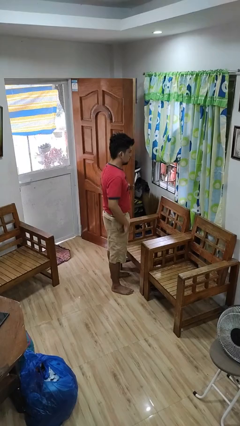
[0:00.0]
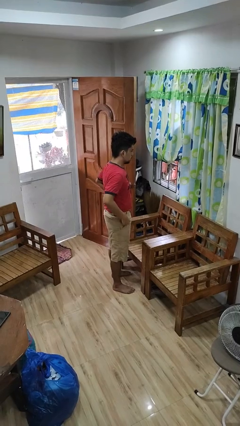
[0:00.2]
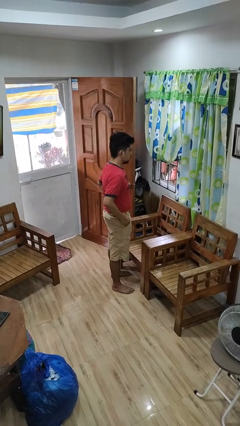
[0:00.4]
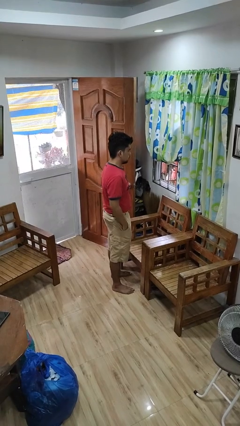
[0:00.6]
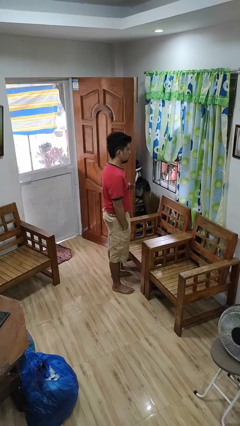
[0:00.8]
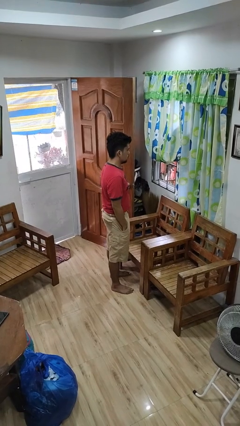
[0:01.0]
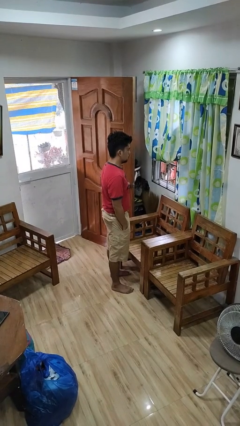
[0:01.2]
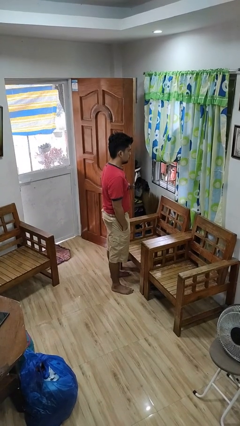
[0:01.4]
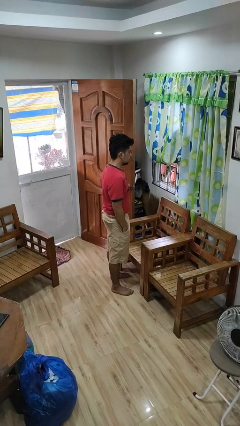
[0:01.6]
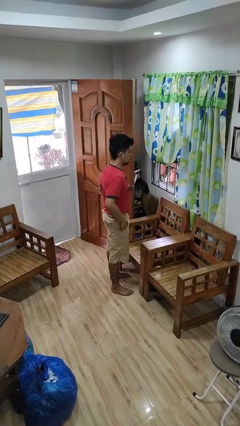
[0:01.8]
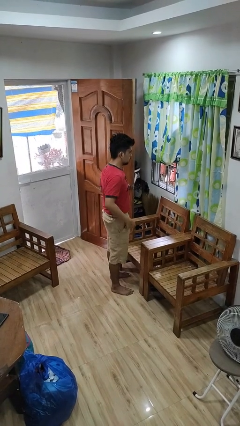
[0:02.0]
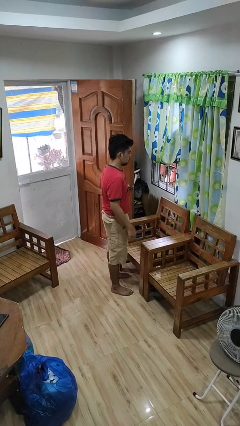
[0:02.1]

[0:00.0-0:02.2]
person puts hands in back pockets

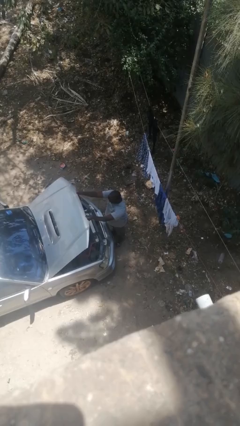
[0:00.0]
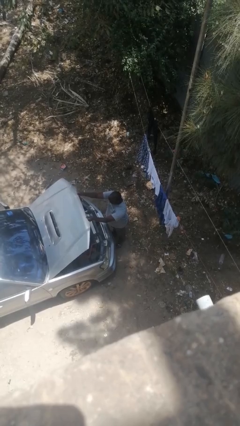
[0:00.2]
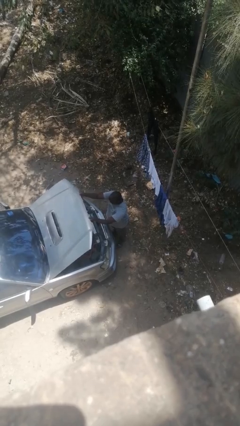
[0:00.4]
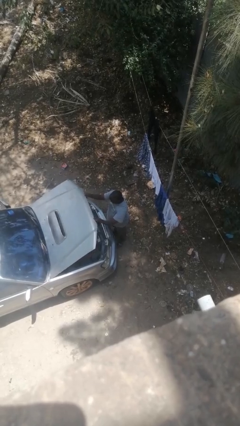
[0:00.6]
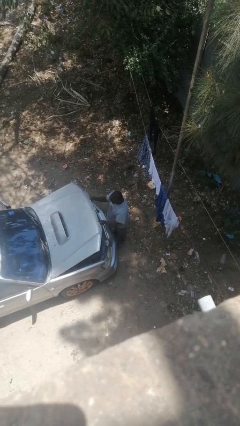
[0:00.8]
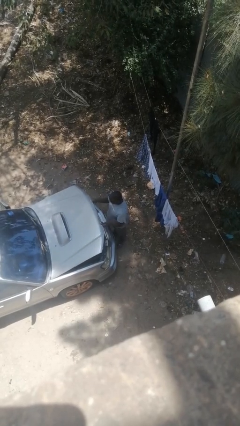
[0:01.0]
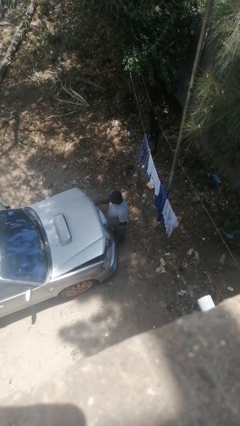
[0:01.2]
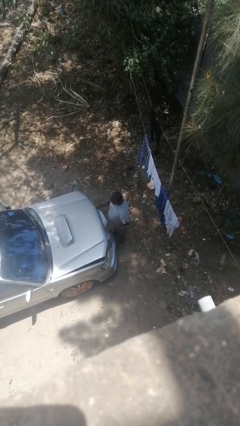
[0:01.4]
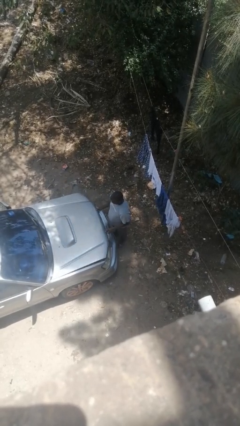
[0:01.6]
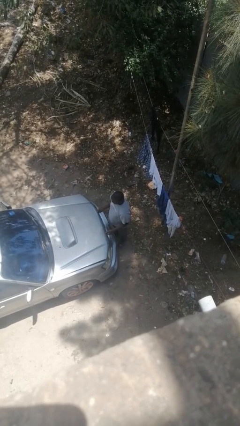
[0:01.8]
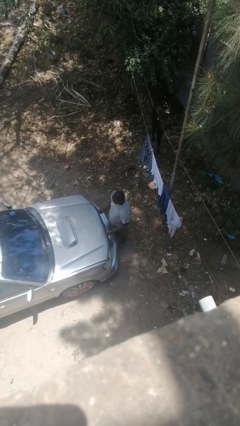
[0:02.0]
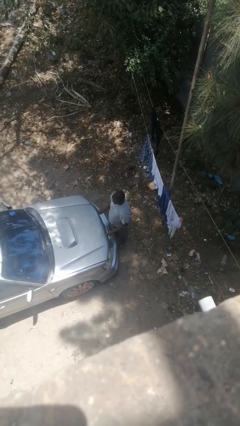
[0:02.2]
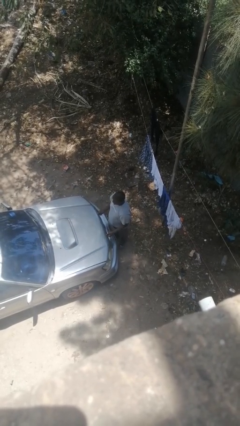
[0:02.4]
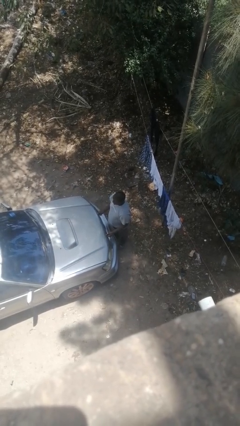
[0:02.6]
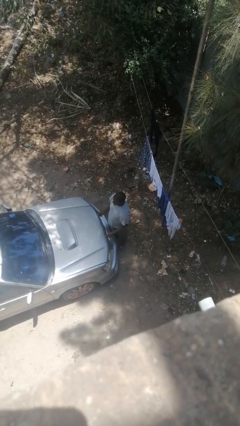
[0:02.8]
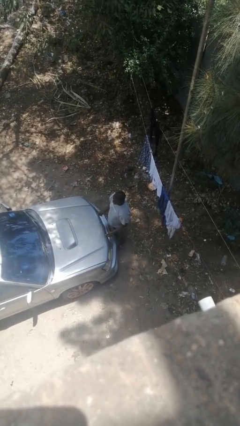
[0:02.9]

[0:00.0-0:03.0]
person closes car hood

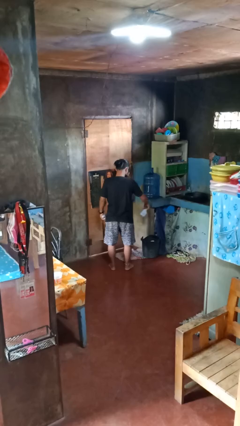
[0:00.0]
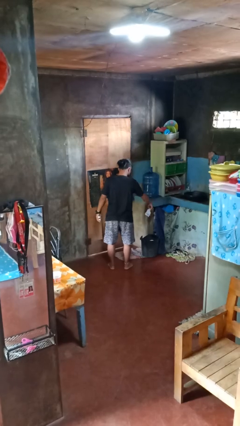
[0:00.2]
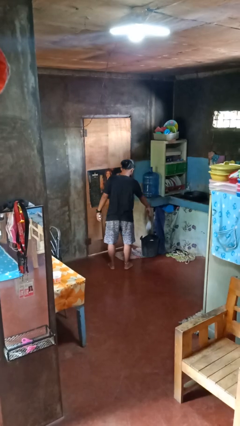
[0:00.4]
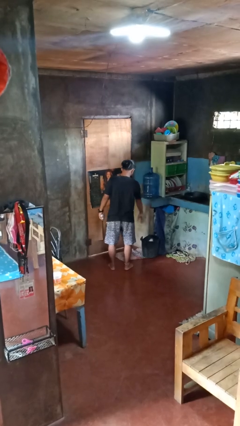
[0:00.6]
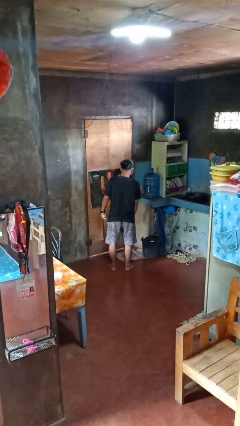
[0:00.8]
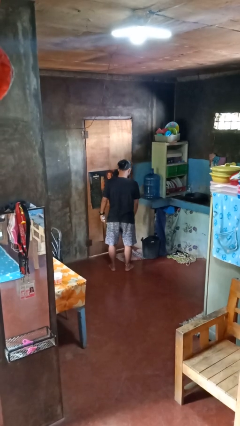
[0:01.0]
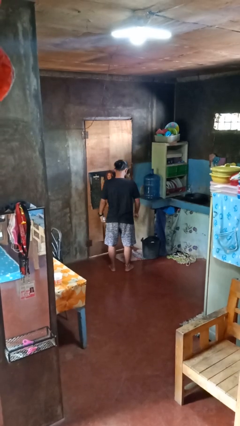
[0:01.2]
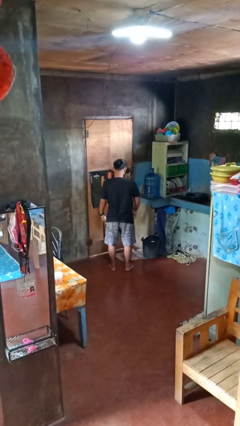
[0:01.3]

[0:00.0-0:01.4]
person discards trash

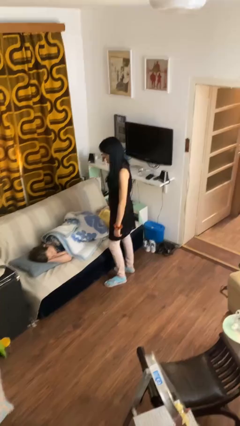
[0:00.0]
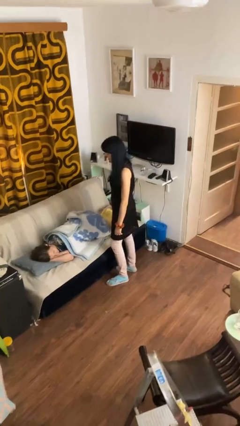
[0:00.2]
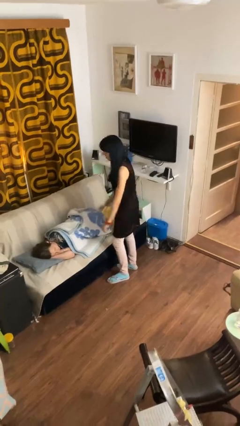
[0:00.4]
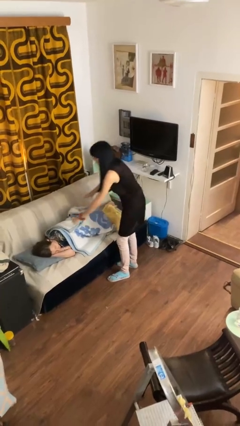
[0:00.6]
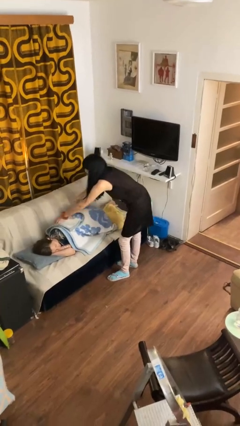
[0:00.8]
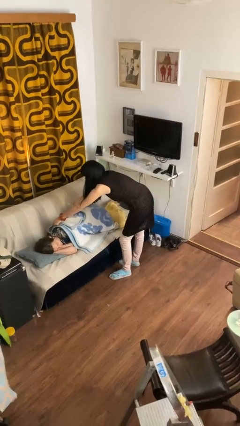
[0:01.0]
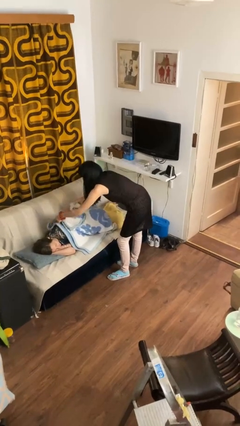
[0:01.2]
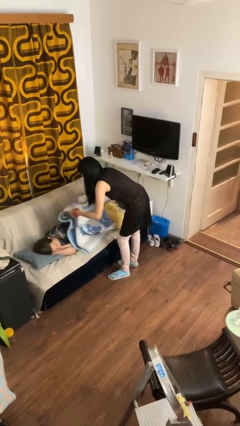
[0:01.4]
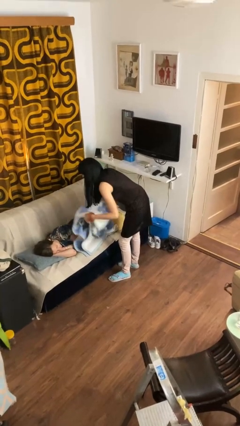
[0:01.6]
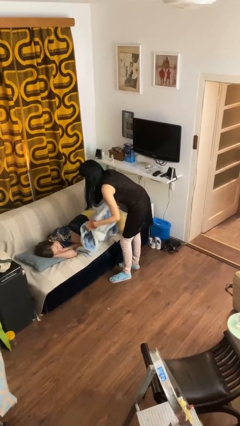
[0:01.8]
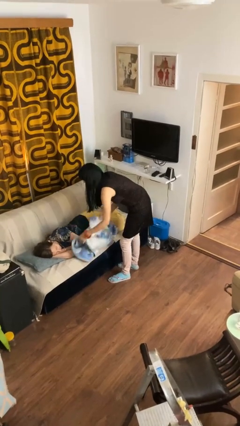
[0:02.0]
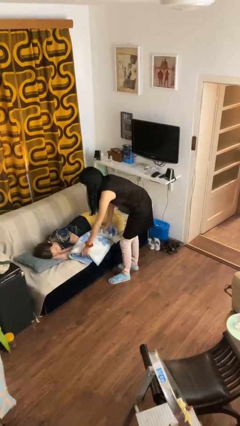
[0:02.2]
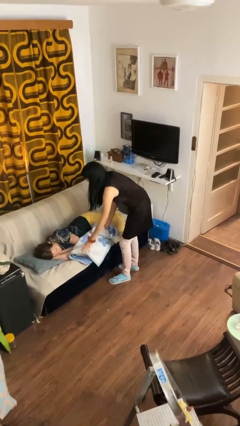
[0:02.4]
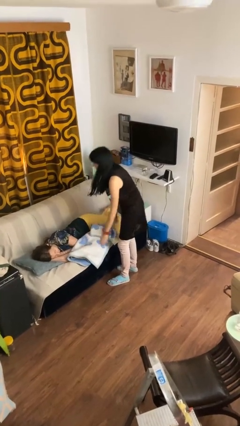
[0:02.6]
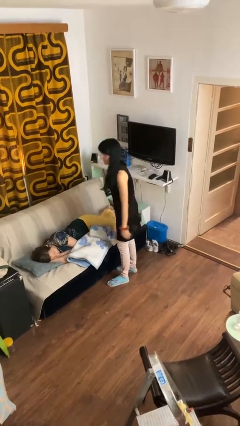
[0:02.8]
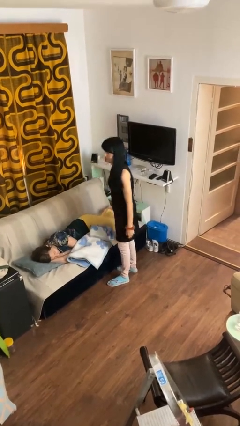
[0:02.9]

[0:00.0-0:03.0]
person uncovers friend with blanket

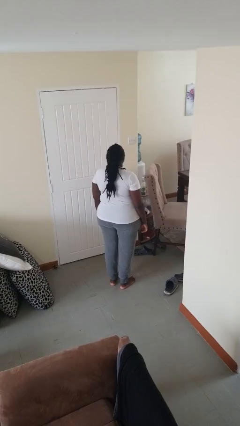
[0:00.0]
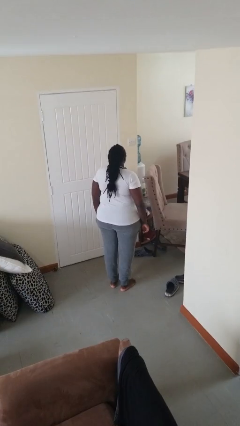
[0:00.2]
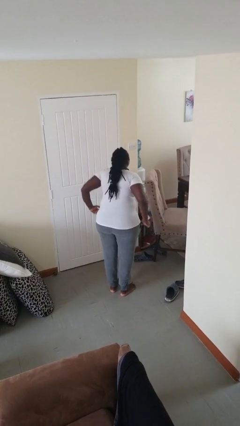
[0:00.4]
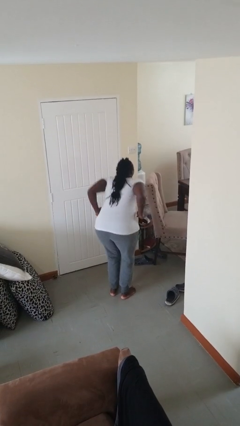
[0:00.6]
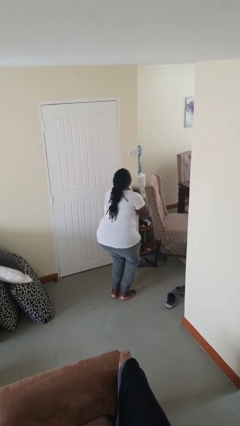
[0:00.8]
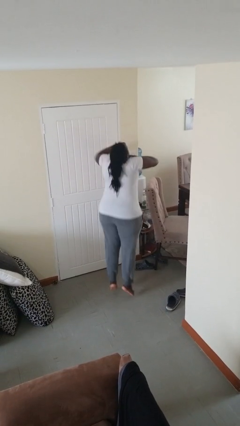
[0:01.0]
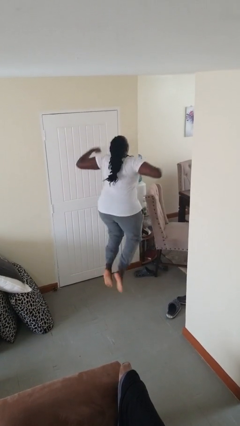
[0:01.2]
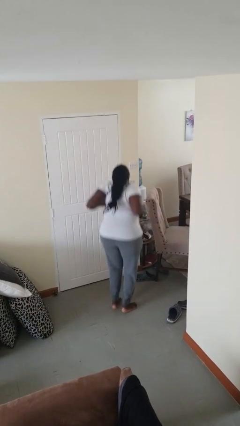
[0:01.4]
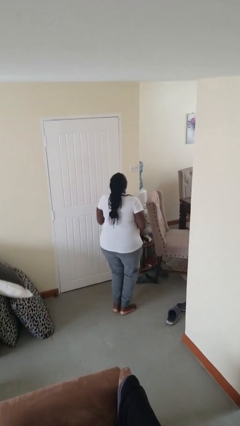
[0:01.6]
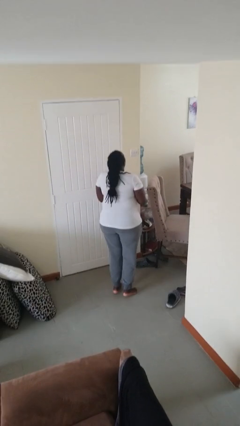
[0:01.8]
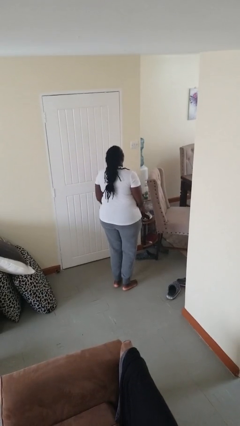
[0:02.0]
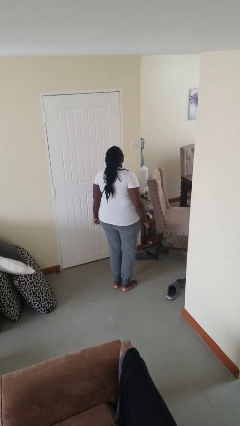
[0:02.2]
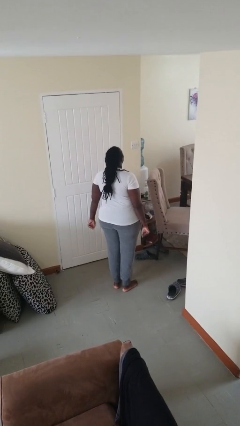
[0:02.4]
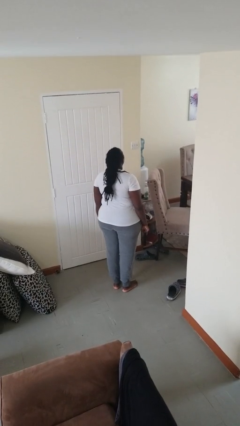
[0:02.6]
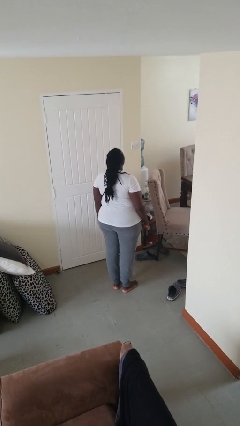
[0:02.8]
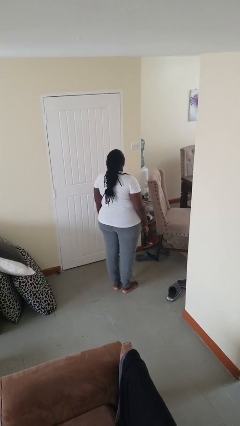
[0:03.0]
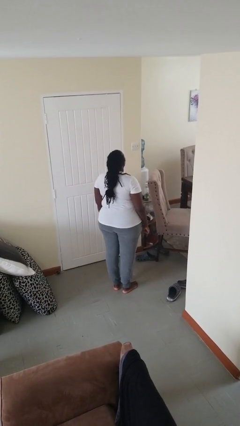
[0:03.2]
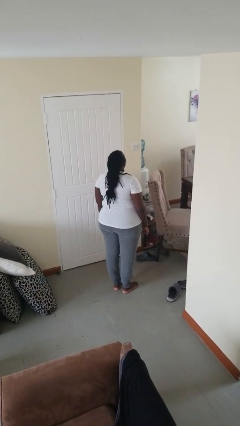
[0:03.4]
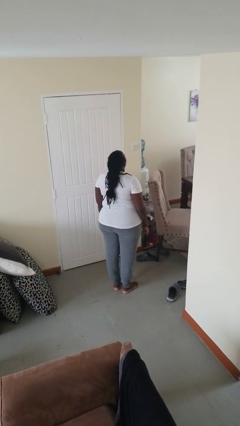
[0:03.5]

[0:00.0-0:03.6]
person jumps

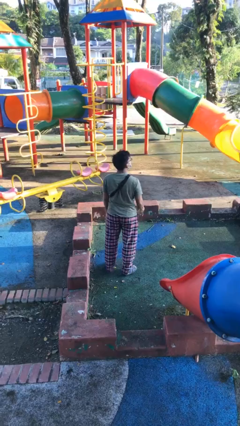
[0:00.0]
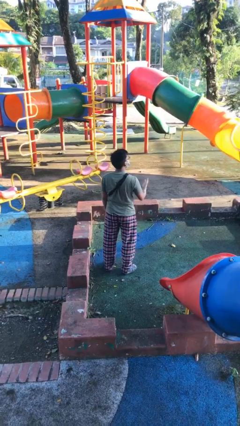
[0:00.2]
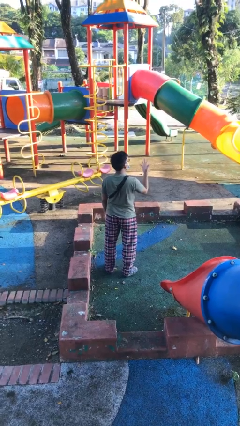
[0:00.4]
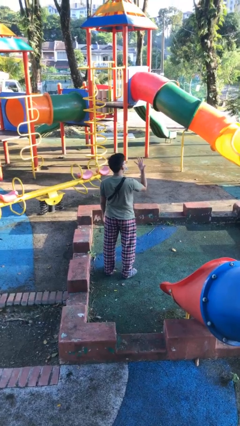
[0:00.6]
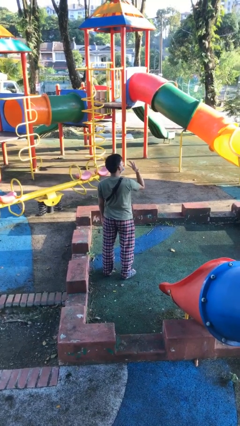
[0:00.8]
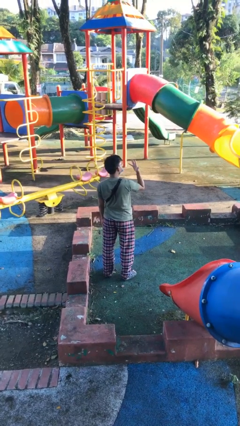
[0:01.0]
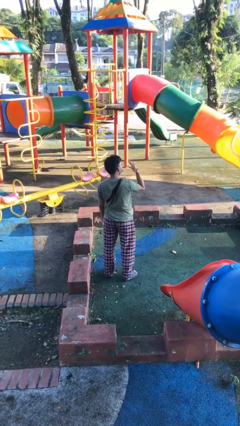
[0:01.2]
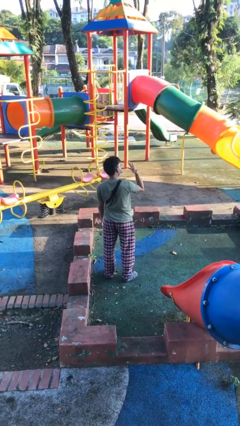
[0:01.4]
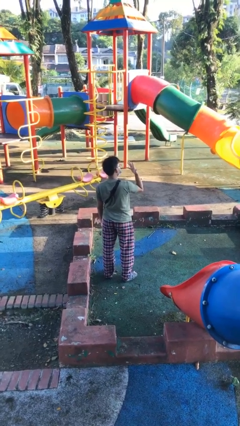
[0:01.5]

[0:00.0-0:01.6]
person gestures number five

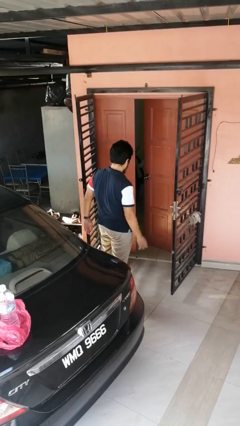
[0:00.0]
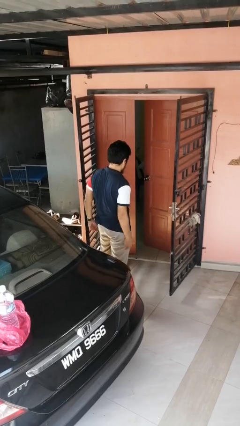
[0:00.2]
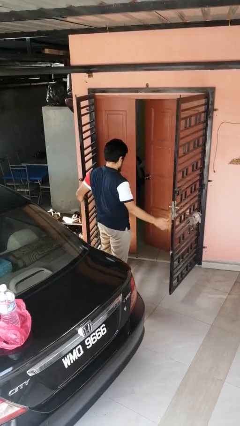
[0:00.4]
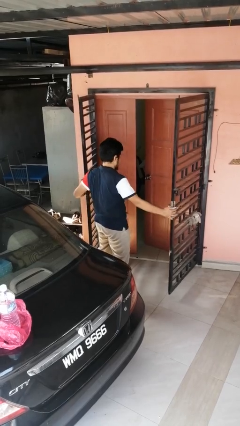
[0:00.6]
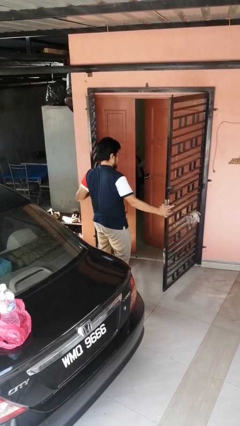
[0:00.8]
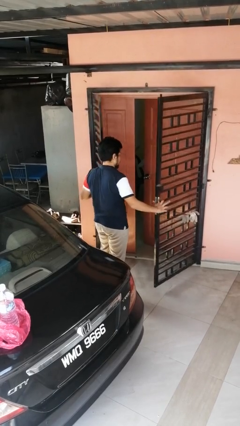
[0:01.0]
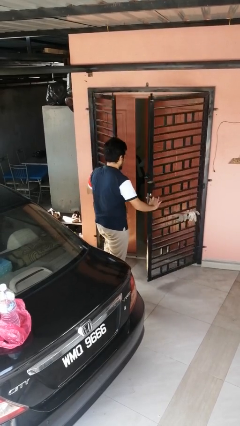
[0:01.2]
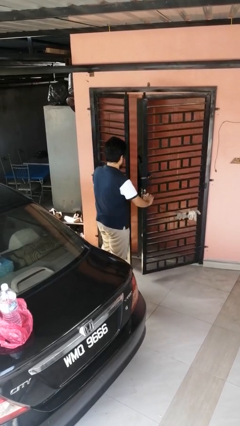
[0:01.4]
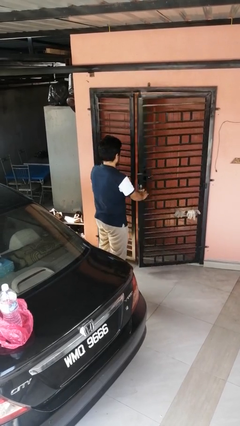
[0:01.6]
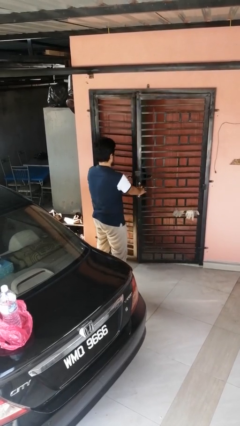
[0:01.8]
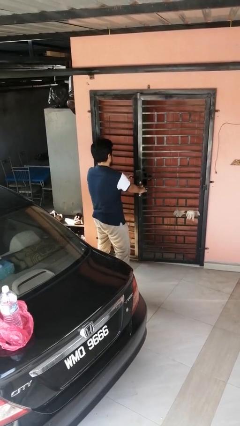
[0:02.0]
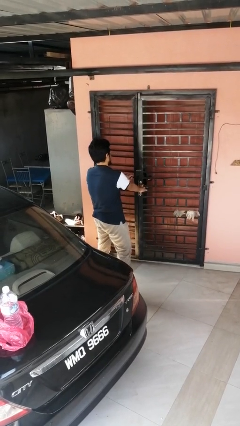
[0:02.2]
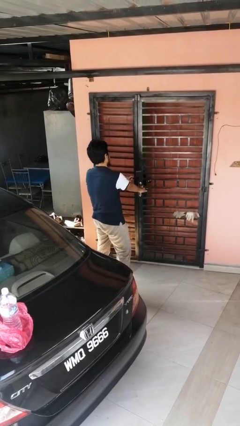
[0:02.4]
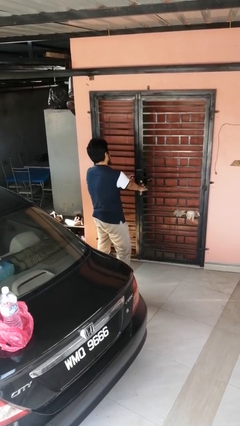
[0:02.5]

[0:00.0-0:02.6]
person closes gate
